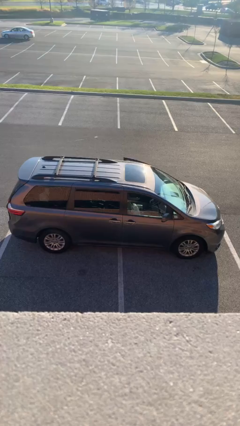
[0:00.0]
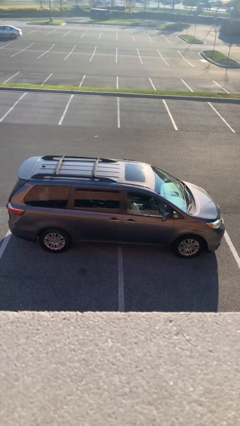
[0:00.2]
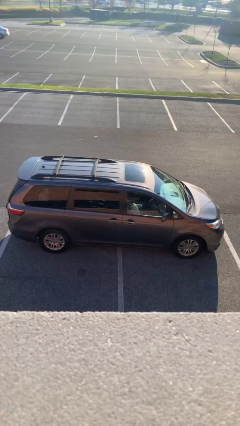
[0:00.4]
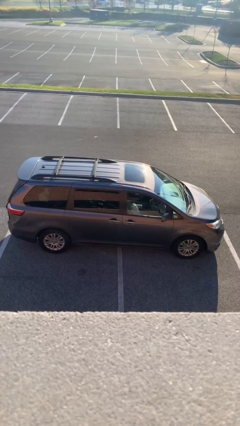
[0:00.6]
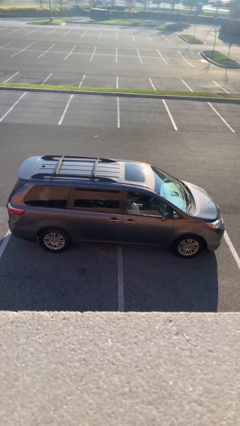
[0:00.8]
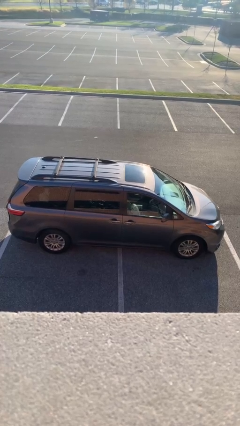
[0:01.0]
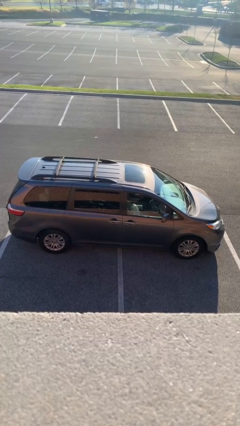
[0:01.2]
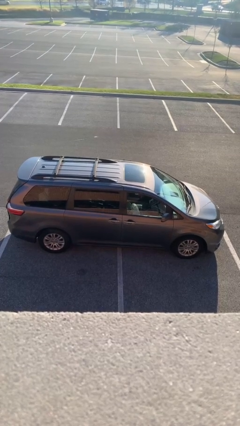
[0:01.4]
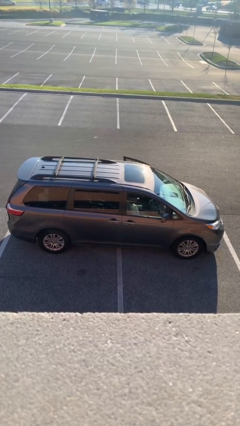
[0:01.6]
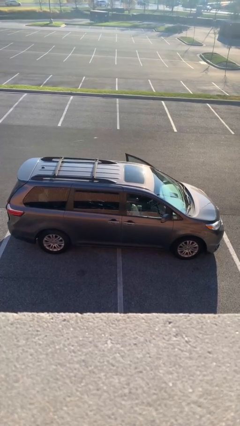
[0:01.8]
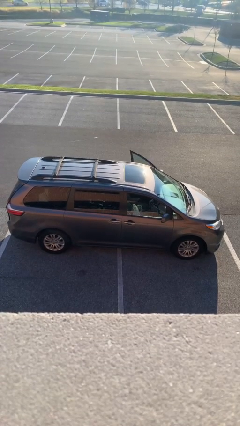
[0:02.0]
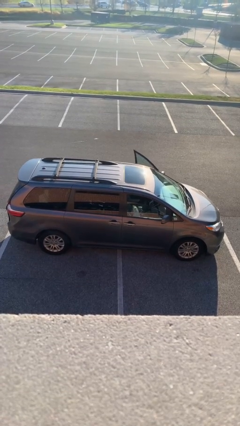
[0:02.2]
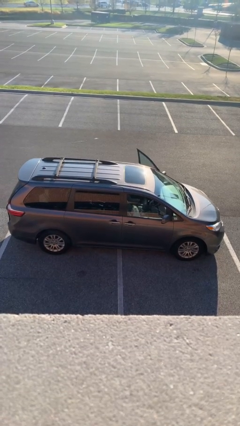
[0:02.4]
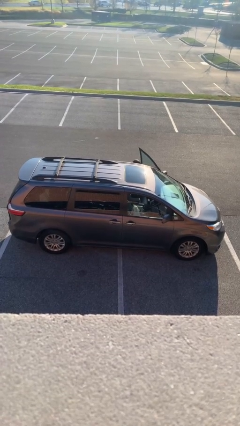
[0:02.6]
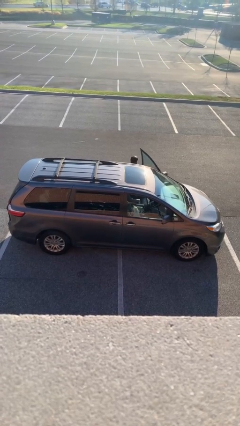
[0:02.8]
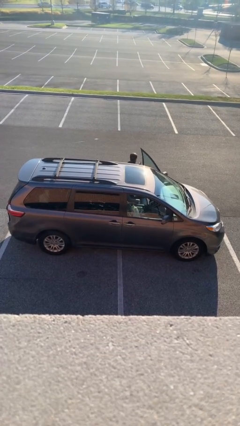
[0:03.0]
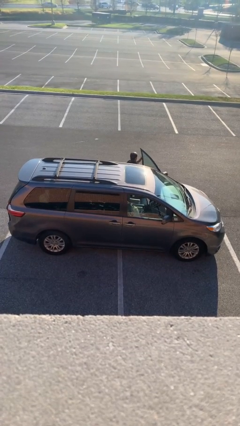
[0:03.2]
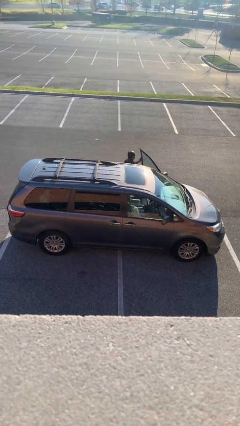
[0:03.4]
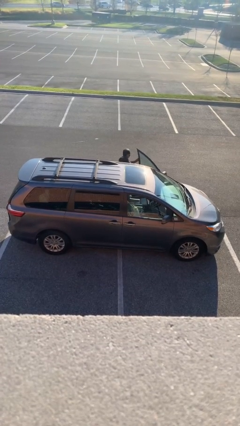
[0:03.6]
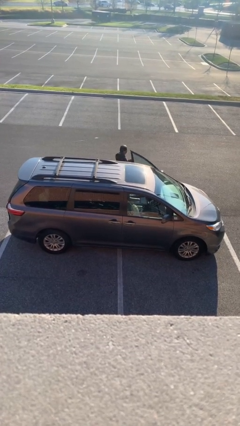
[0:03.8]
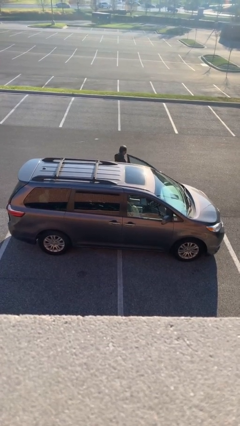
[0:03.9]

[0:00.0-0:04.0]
car drops off person

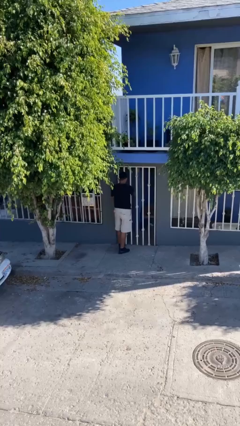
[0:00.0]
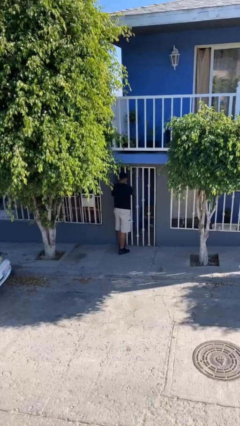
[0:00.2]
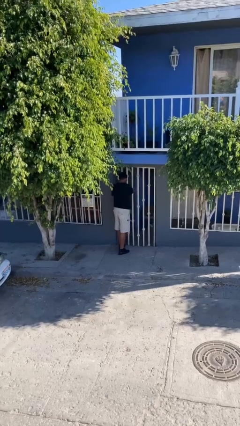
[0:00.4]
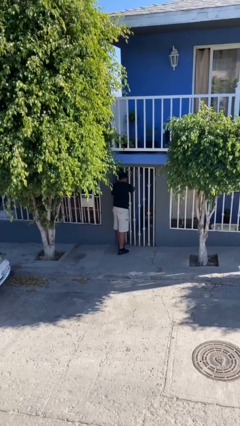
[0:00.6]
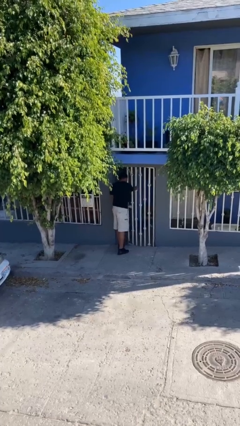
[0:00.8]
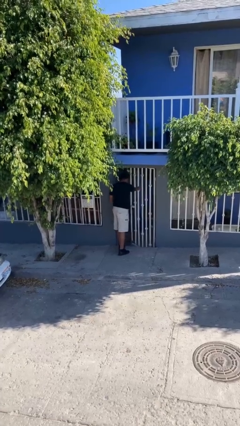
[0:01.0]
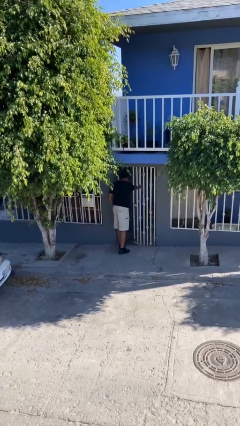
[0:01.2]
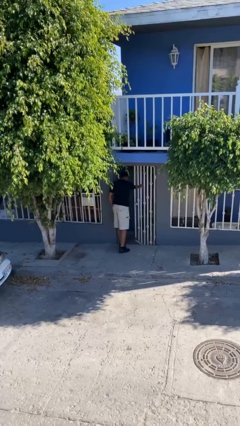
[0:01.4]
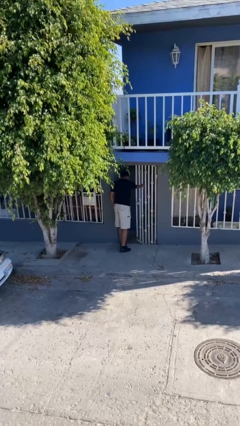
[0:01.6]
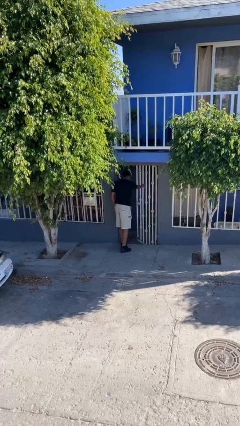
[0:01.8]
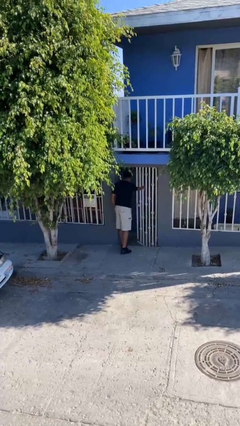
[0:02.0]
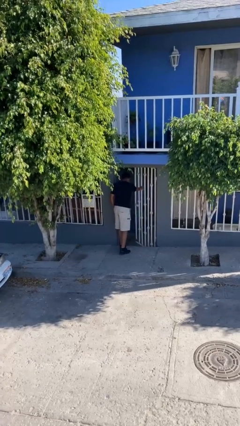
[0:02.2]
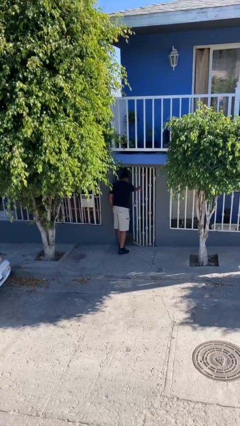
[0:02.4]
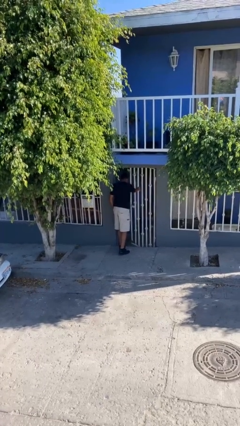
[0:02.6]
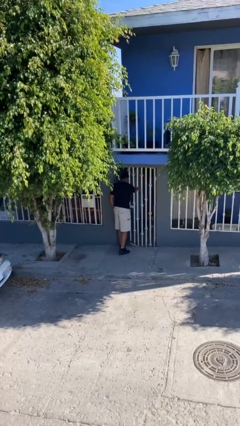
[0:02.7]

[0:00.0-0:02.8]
person opens facility door

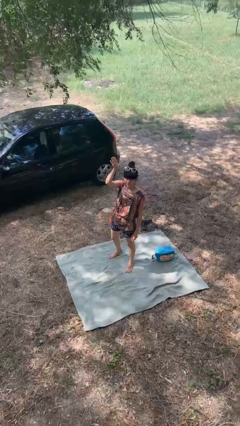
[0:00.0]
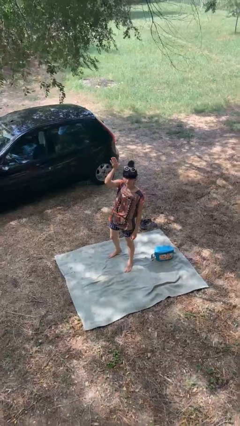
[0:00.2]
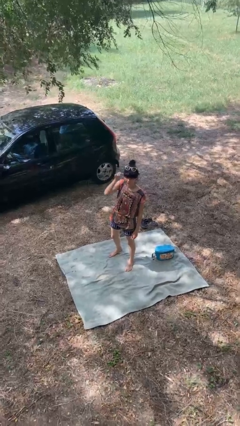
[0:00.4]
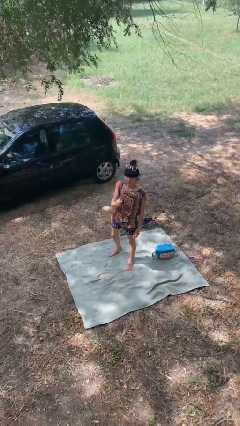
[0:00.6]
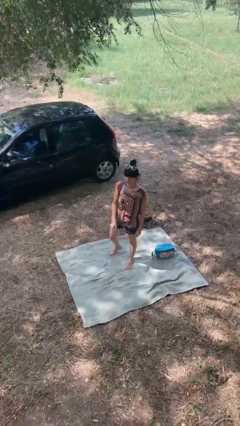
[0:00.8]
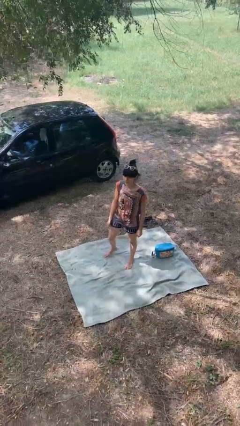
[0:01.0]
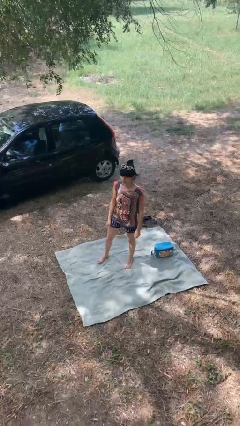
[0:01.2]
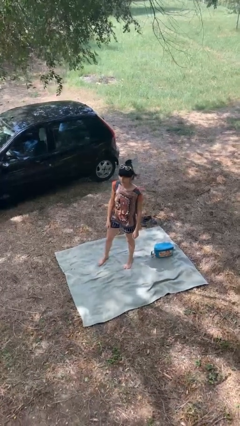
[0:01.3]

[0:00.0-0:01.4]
person gestures lower hand

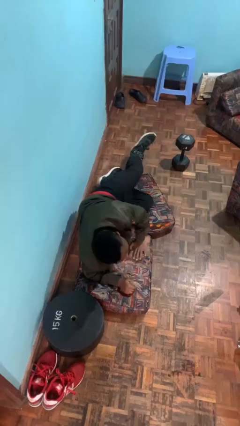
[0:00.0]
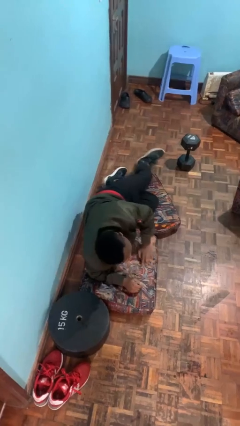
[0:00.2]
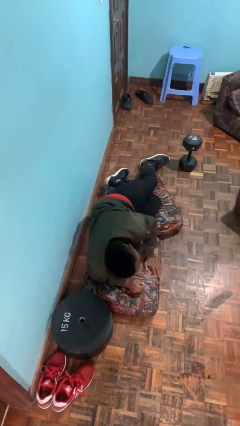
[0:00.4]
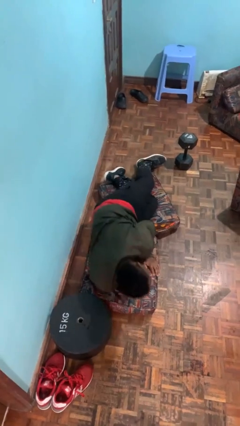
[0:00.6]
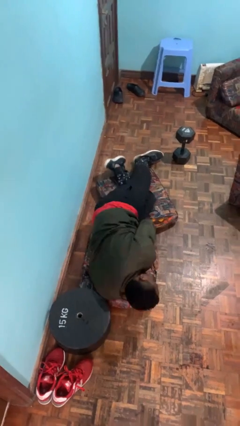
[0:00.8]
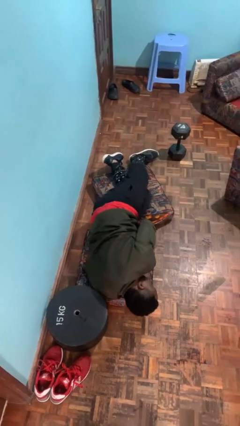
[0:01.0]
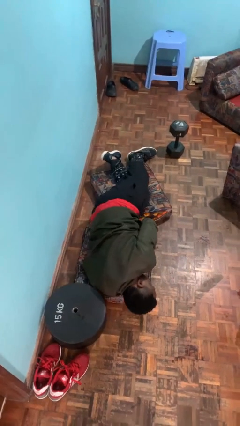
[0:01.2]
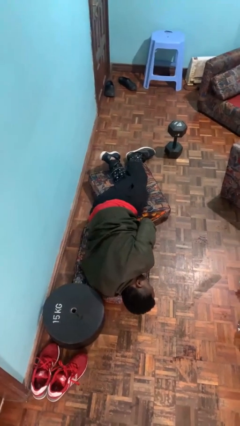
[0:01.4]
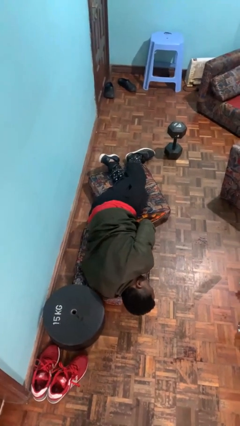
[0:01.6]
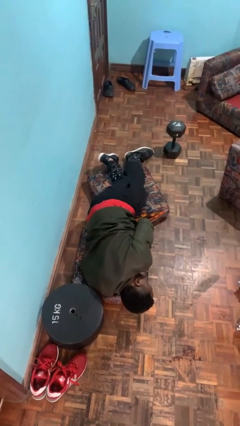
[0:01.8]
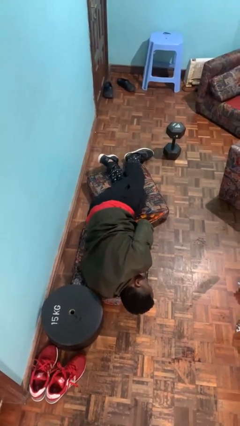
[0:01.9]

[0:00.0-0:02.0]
person lies down on floor

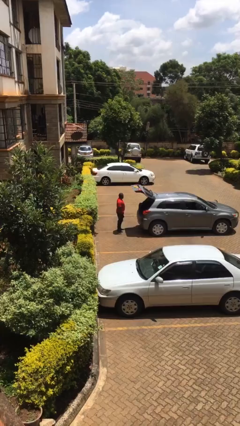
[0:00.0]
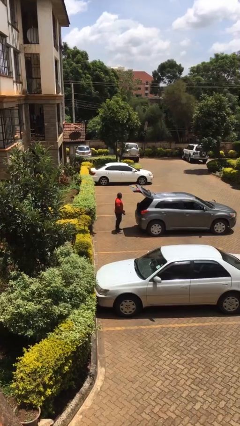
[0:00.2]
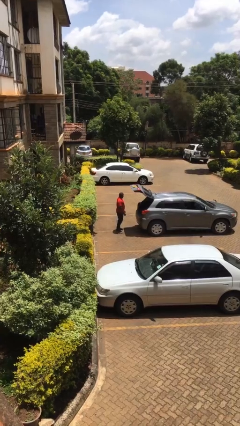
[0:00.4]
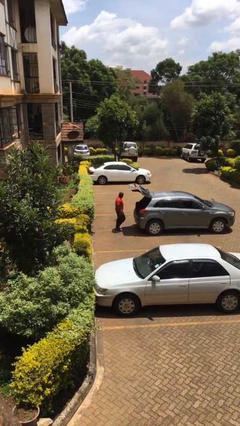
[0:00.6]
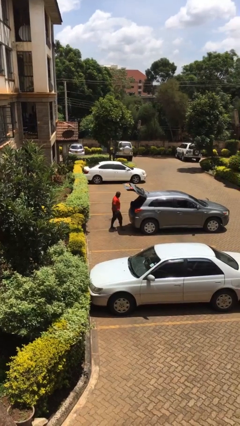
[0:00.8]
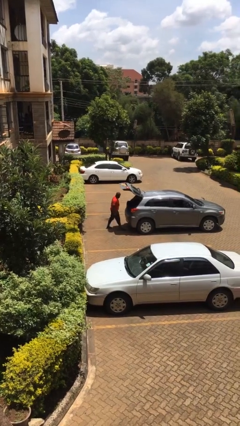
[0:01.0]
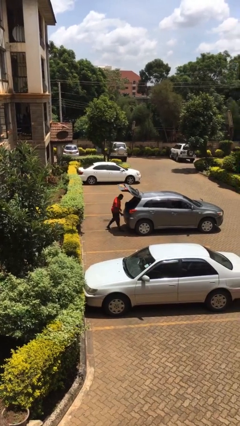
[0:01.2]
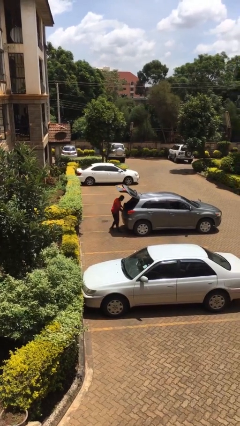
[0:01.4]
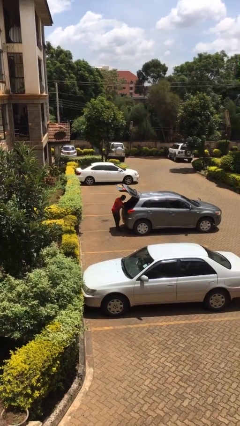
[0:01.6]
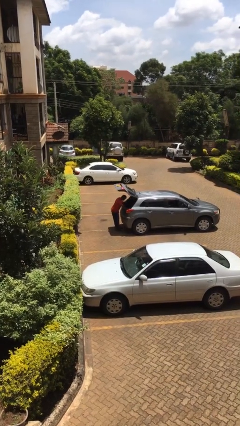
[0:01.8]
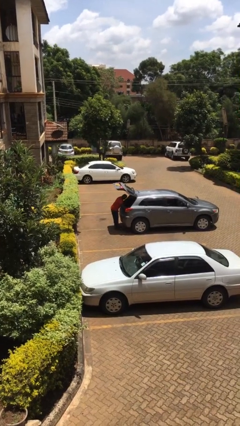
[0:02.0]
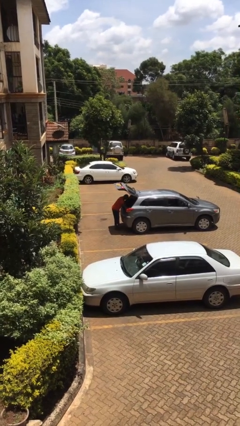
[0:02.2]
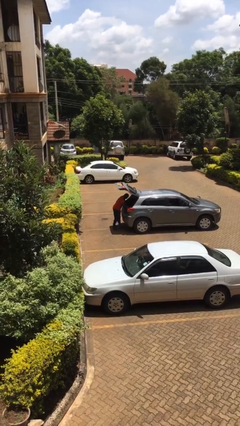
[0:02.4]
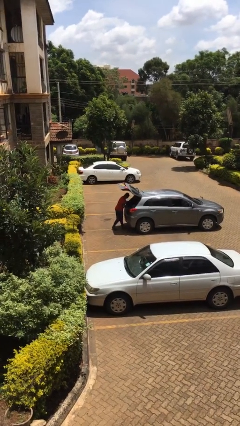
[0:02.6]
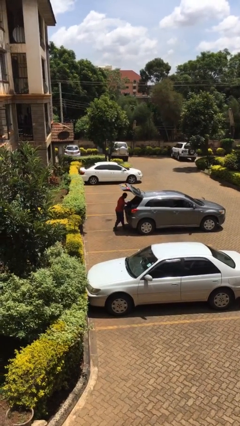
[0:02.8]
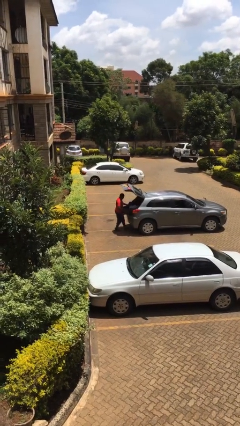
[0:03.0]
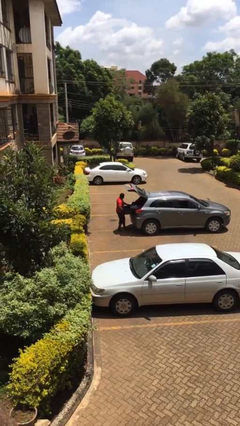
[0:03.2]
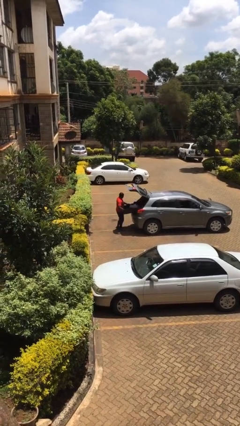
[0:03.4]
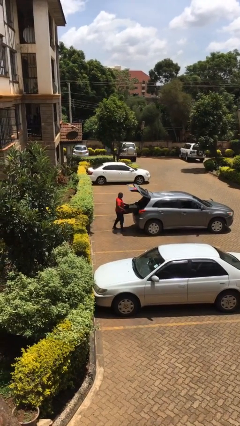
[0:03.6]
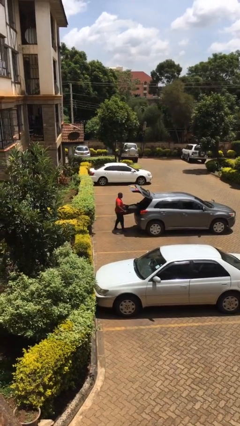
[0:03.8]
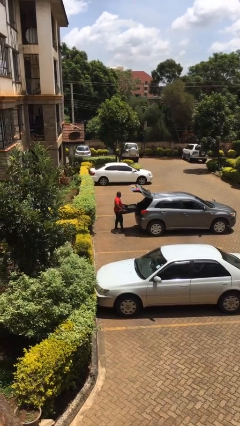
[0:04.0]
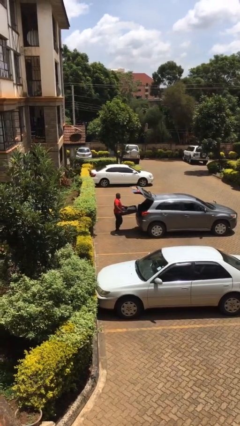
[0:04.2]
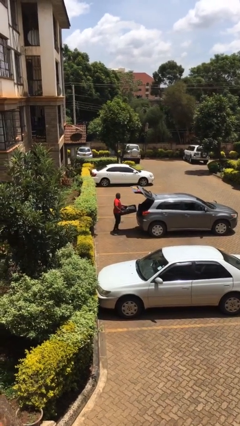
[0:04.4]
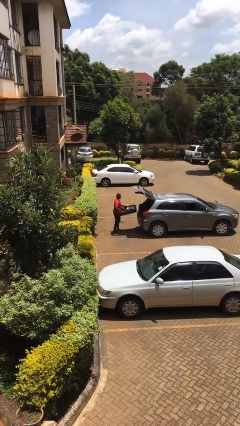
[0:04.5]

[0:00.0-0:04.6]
person unloads car

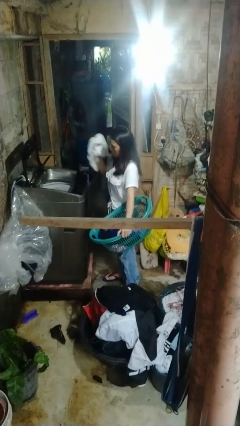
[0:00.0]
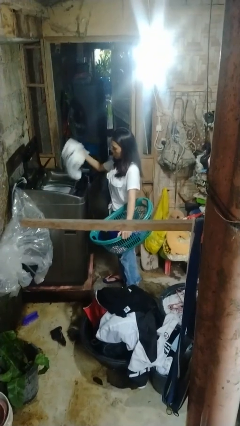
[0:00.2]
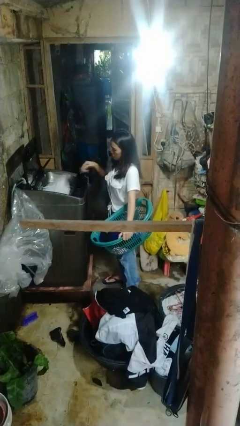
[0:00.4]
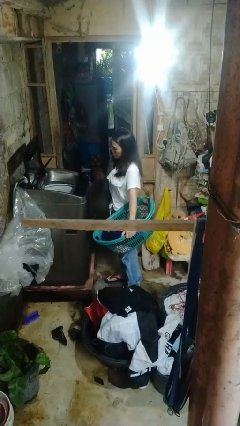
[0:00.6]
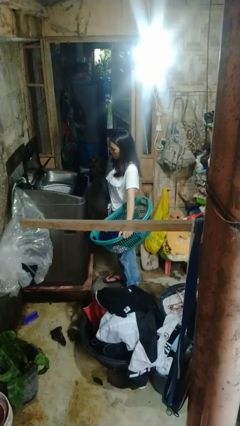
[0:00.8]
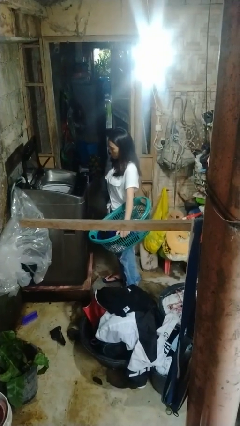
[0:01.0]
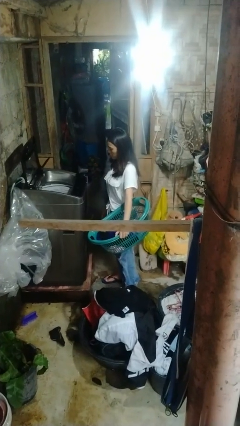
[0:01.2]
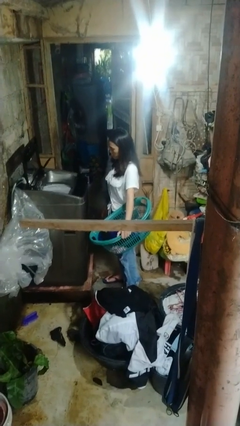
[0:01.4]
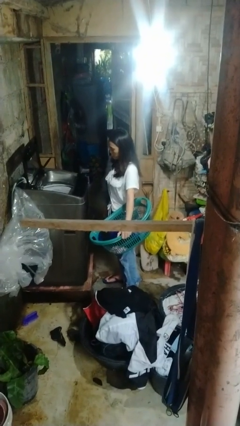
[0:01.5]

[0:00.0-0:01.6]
person loads clotheswasher

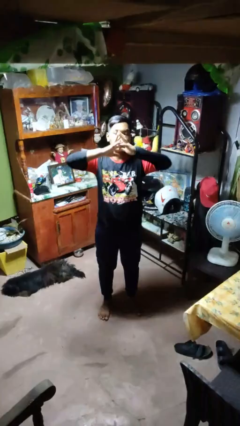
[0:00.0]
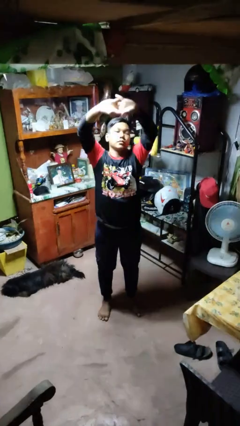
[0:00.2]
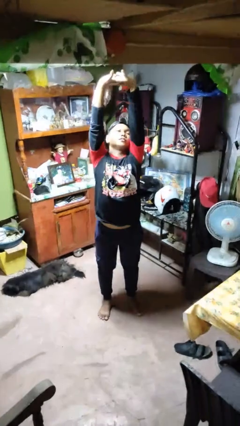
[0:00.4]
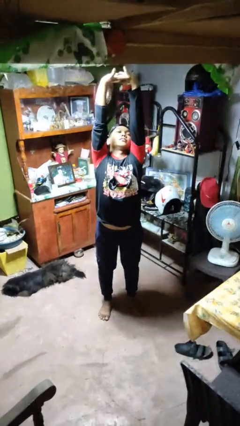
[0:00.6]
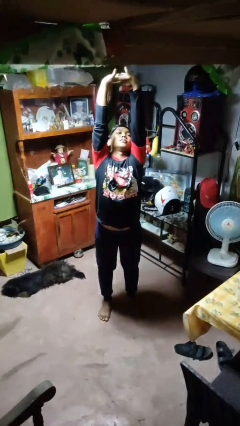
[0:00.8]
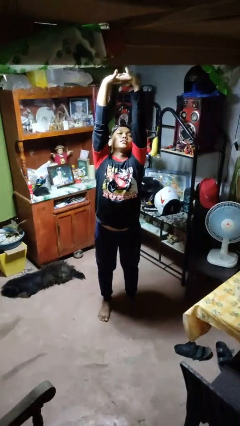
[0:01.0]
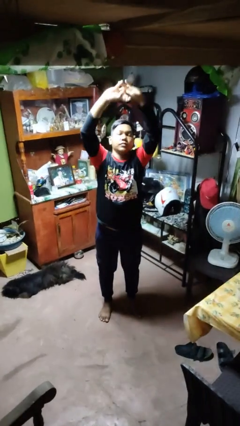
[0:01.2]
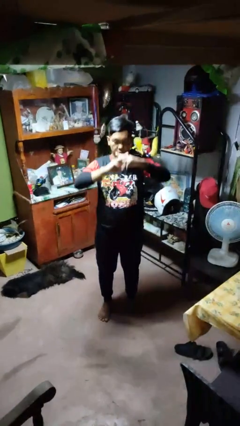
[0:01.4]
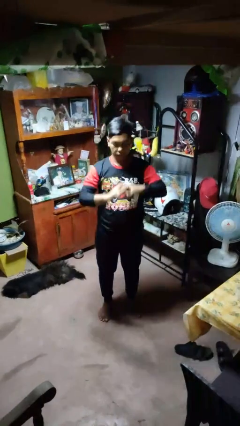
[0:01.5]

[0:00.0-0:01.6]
person stretches arms over head
